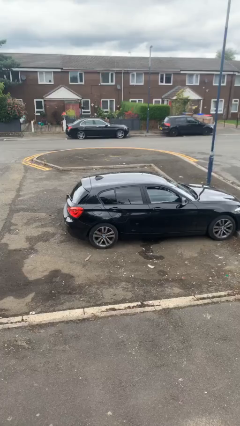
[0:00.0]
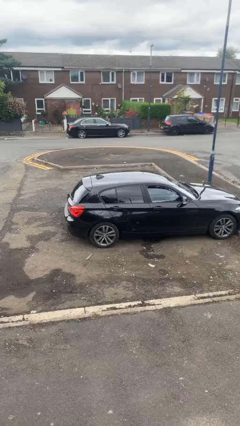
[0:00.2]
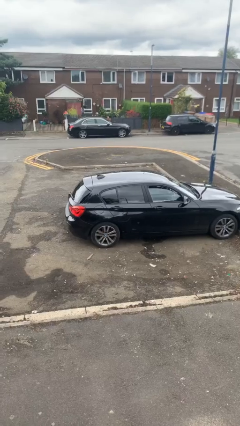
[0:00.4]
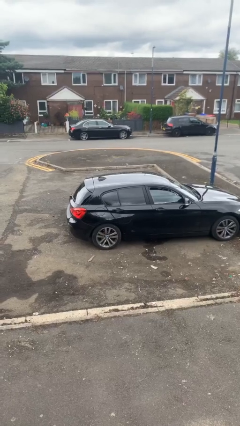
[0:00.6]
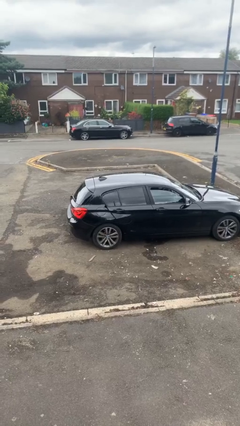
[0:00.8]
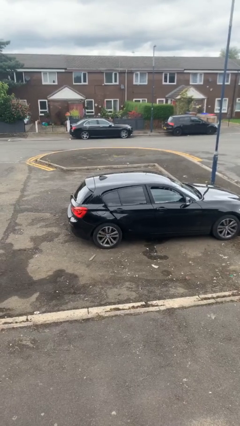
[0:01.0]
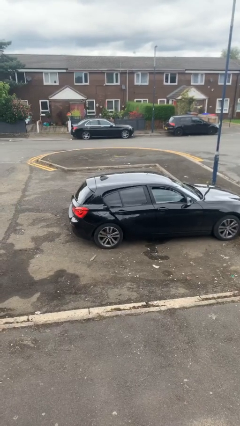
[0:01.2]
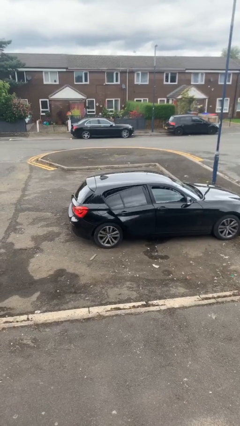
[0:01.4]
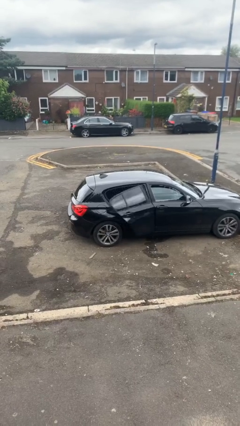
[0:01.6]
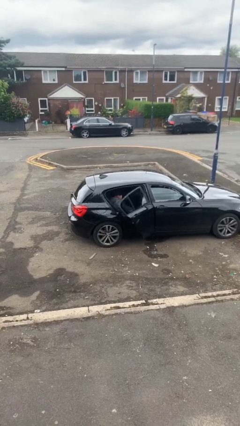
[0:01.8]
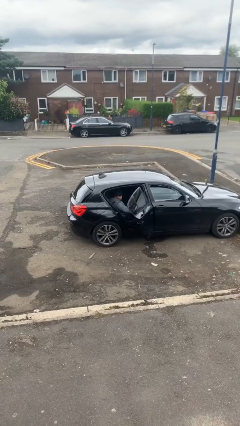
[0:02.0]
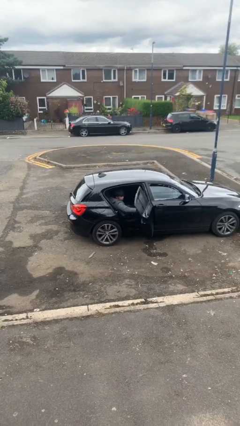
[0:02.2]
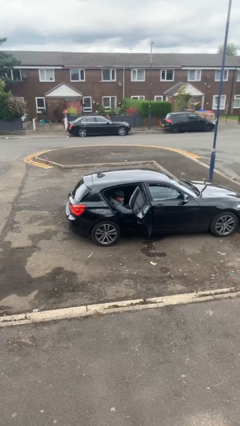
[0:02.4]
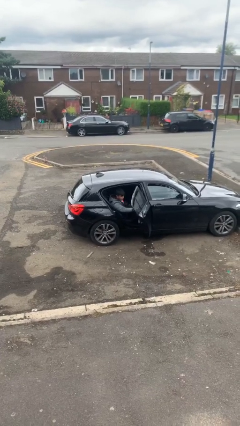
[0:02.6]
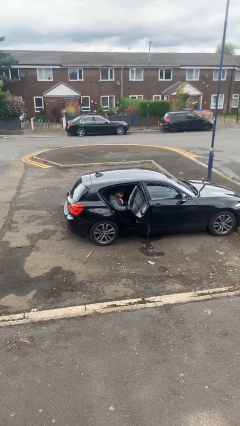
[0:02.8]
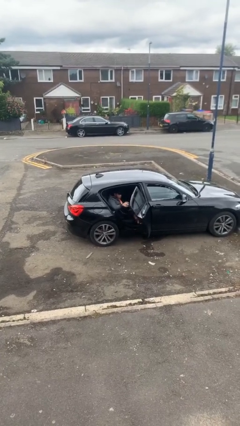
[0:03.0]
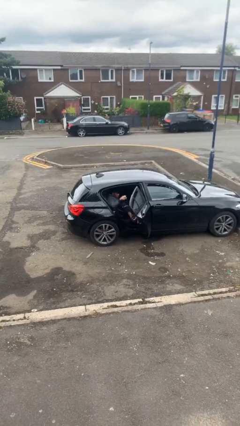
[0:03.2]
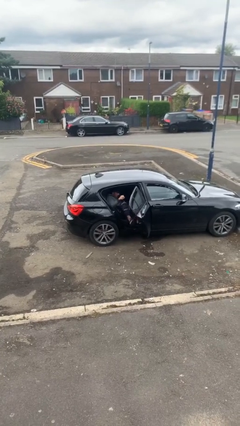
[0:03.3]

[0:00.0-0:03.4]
person opens car door

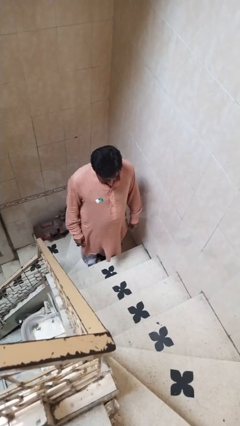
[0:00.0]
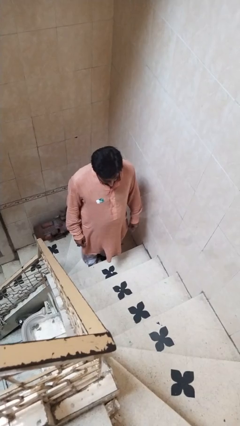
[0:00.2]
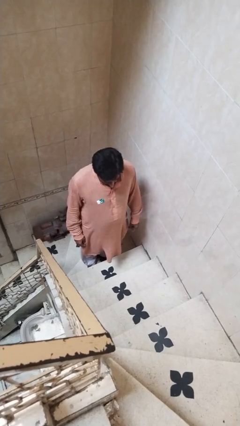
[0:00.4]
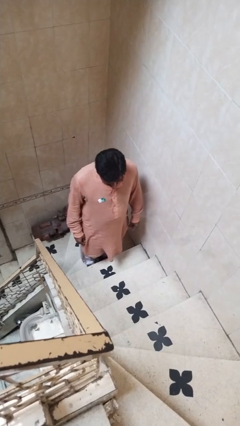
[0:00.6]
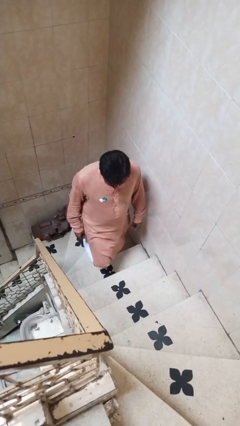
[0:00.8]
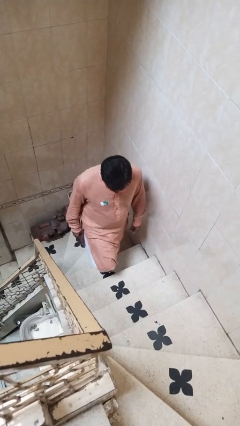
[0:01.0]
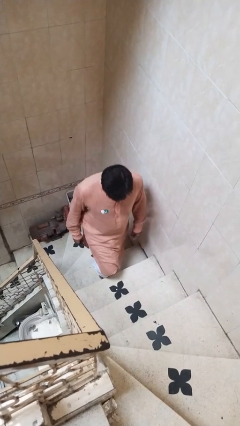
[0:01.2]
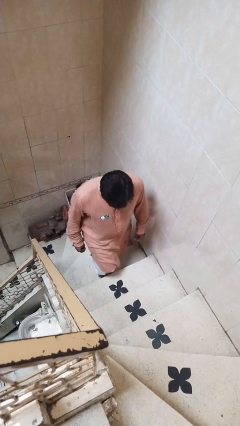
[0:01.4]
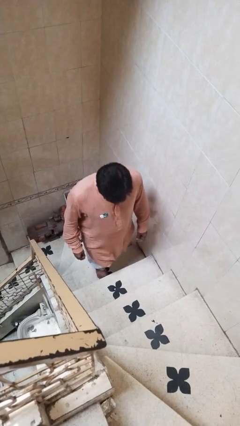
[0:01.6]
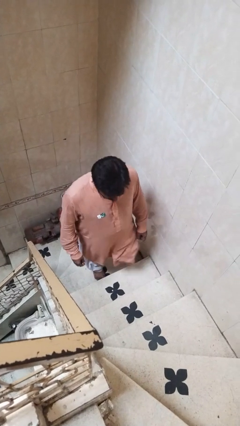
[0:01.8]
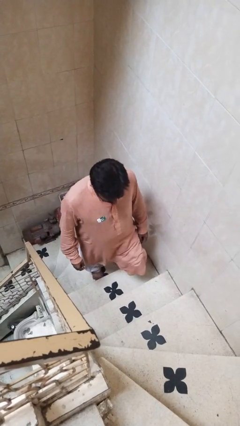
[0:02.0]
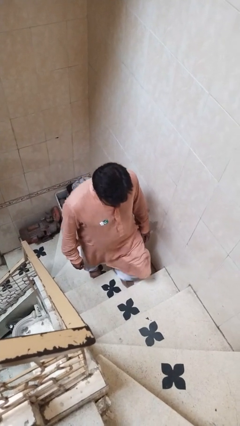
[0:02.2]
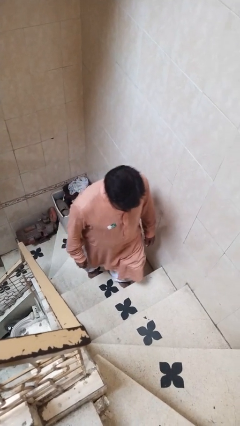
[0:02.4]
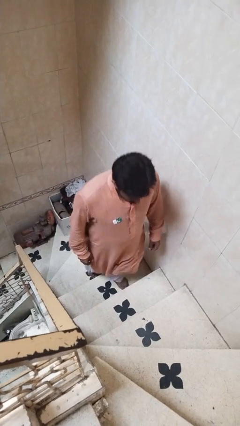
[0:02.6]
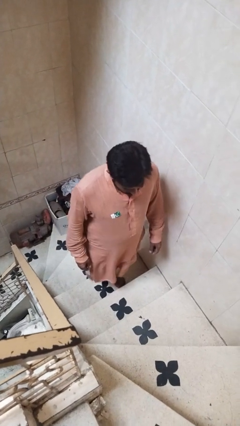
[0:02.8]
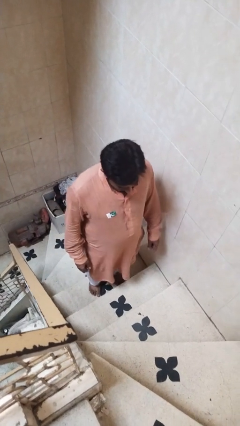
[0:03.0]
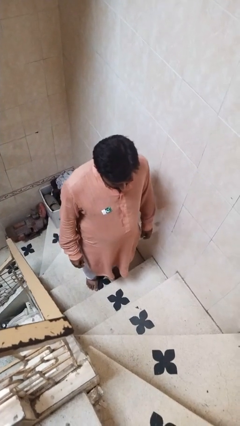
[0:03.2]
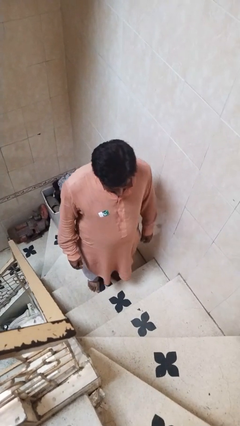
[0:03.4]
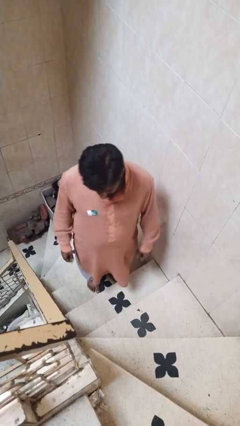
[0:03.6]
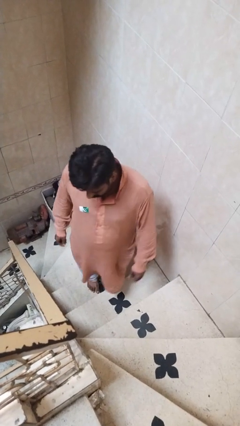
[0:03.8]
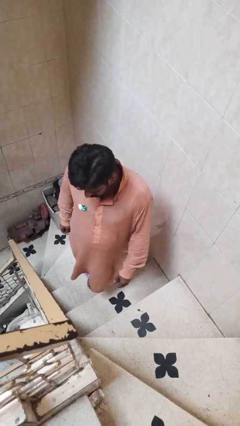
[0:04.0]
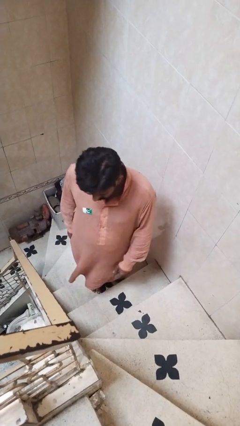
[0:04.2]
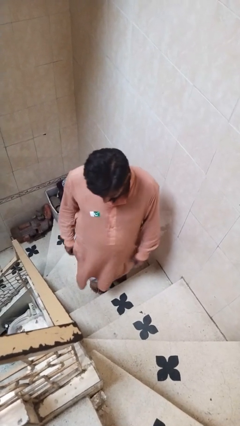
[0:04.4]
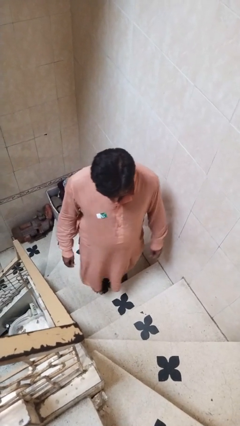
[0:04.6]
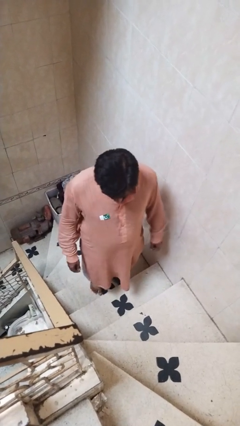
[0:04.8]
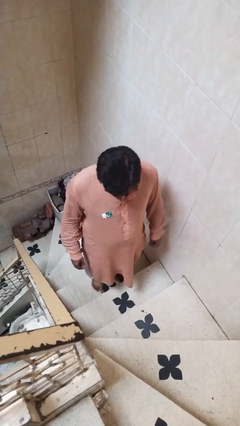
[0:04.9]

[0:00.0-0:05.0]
person climbs up stairs

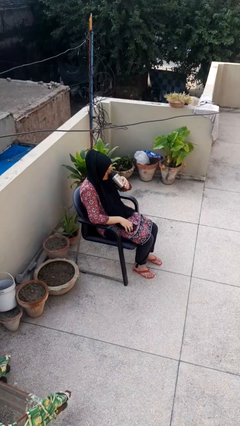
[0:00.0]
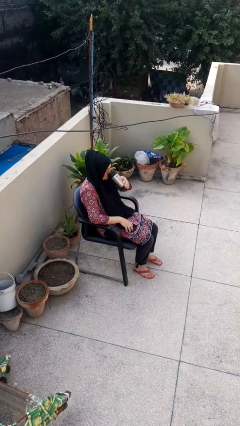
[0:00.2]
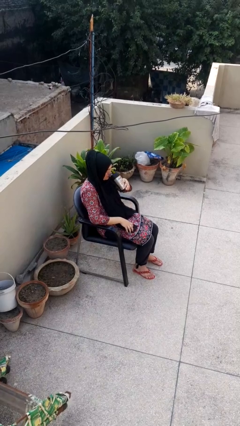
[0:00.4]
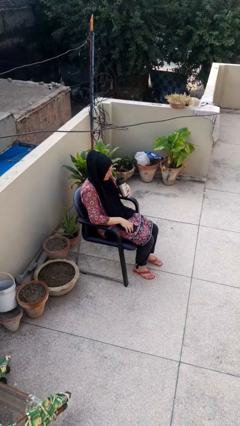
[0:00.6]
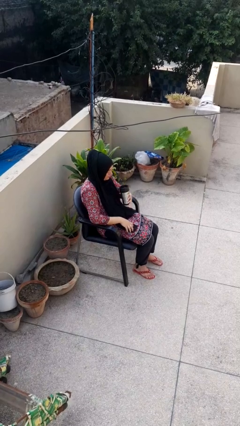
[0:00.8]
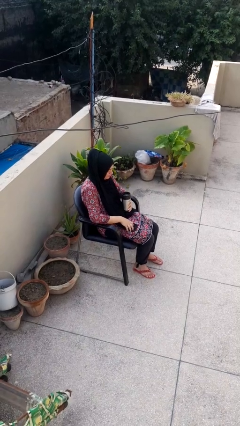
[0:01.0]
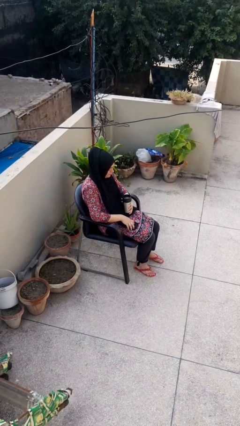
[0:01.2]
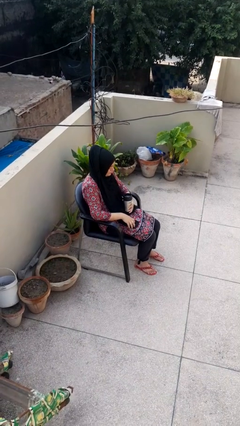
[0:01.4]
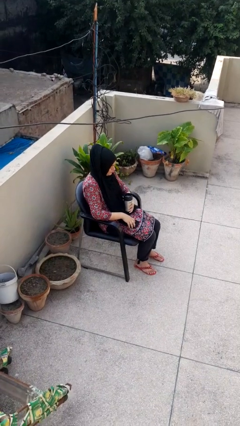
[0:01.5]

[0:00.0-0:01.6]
person drinks from beverage can

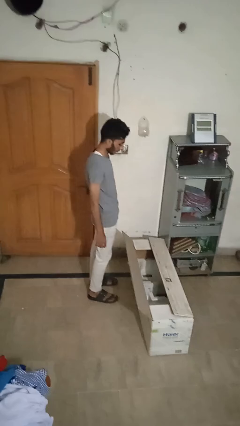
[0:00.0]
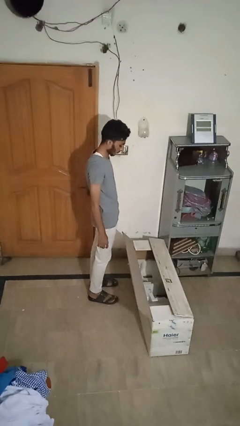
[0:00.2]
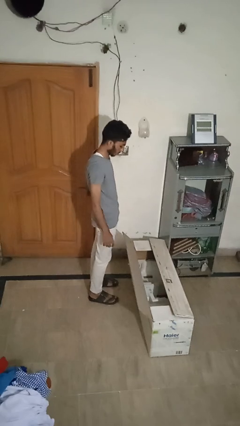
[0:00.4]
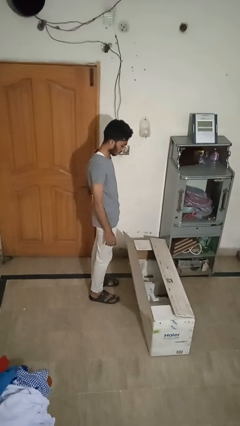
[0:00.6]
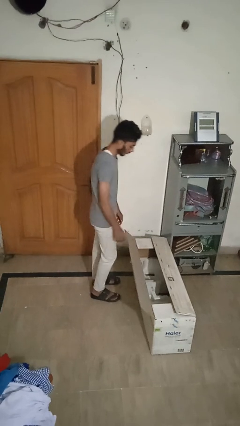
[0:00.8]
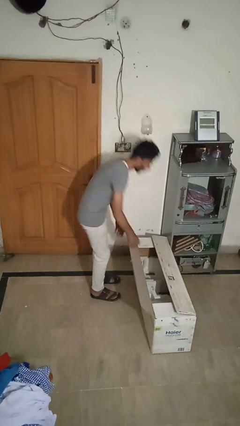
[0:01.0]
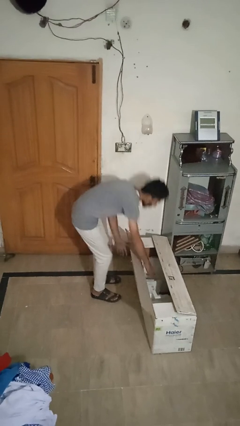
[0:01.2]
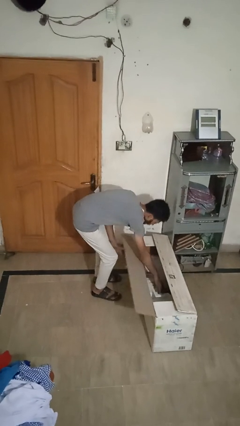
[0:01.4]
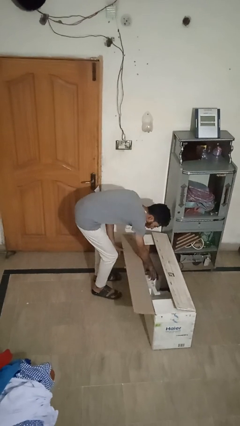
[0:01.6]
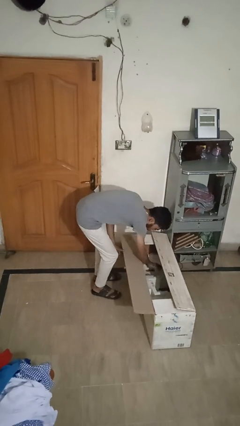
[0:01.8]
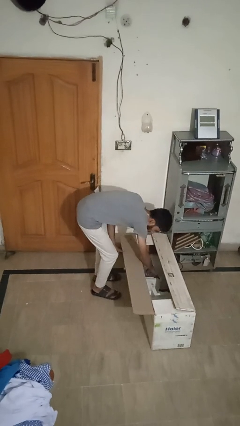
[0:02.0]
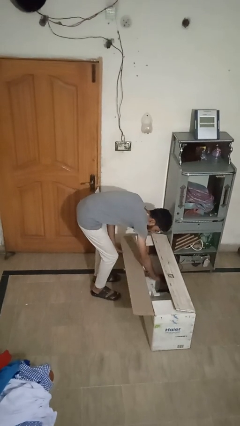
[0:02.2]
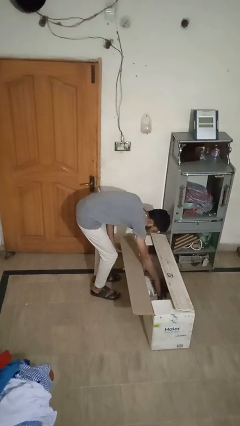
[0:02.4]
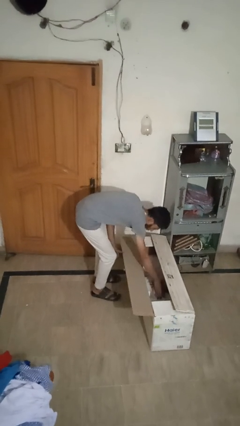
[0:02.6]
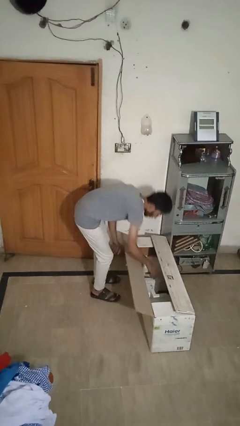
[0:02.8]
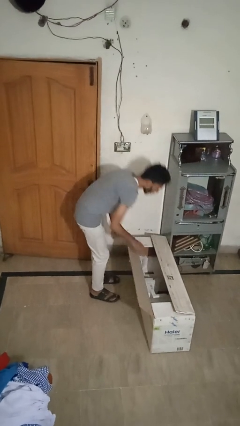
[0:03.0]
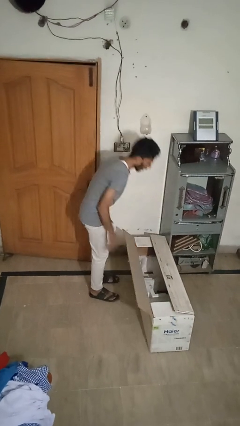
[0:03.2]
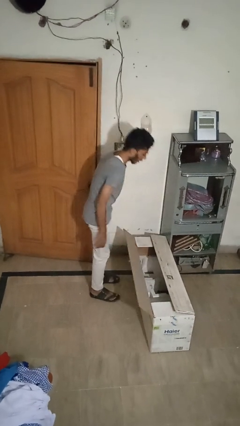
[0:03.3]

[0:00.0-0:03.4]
person searches in box

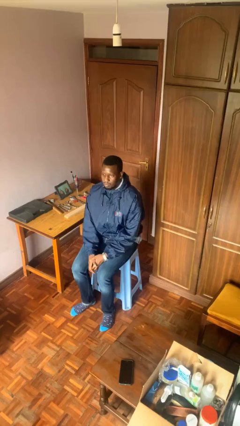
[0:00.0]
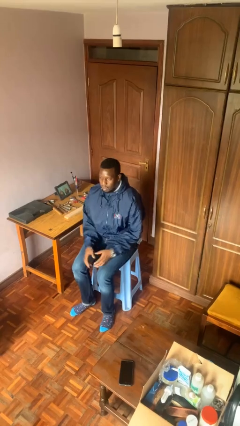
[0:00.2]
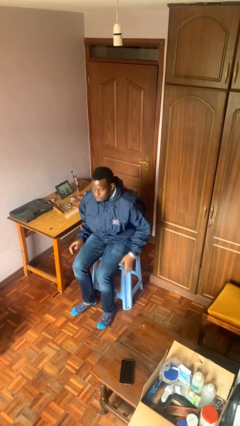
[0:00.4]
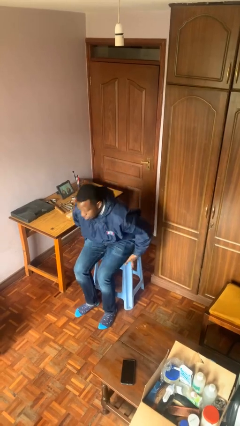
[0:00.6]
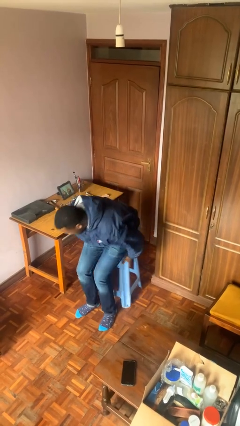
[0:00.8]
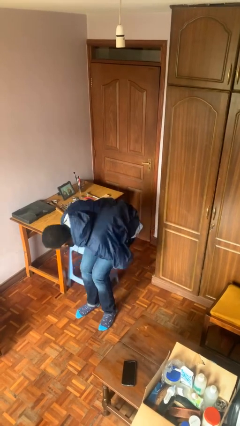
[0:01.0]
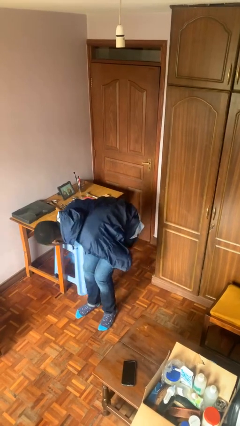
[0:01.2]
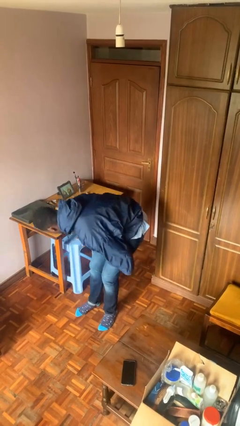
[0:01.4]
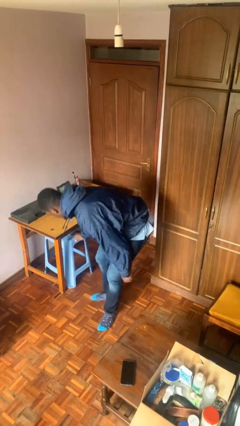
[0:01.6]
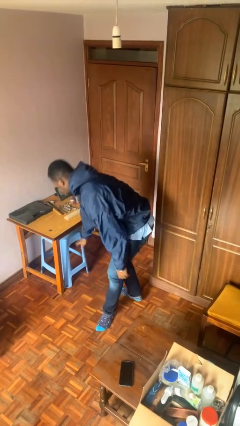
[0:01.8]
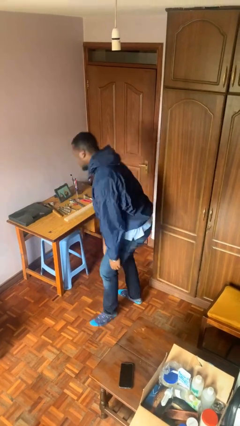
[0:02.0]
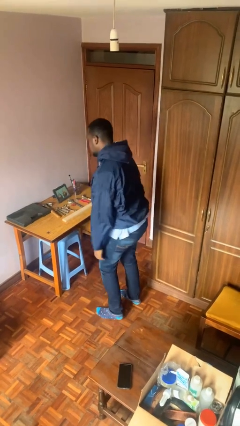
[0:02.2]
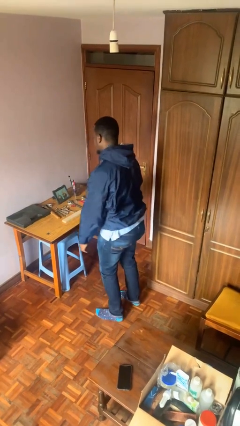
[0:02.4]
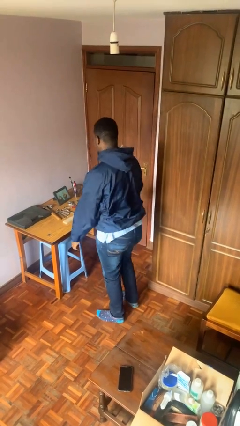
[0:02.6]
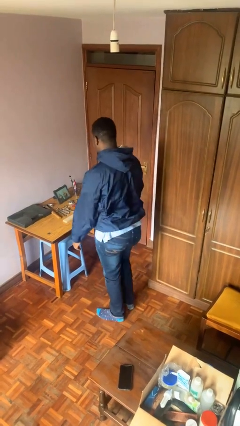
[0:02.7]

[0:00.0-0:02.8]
person stands up

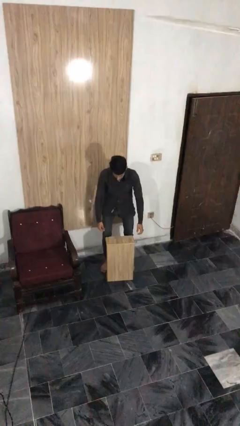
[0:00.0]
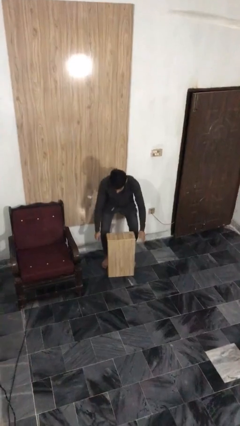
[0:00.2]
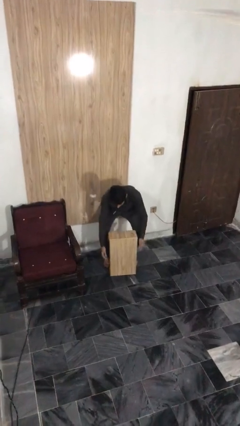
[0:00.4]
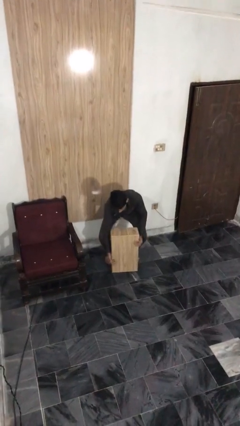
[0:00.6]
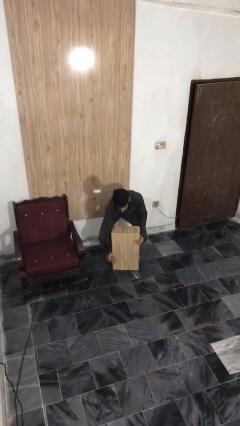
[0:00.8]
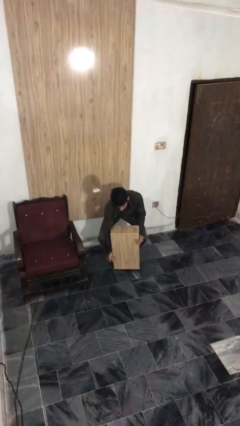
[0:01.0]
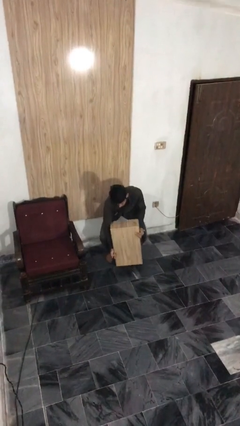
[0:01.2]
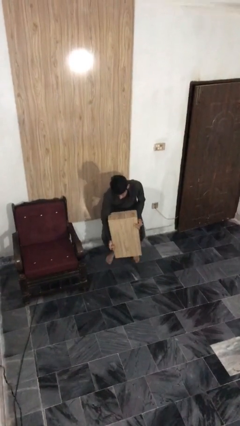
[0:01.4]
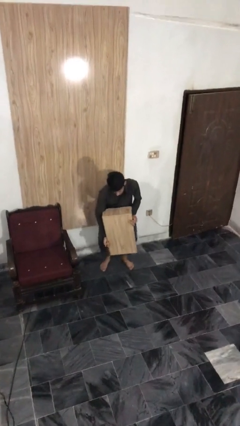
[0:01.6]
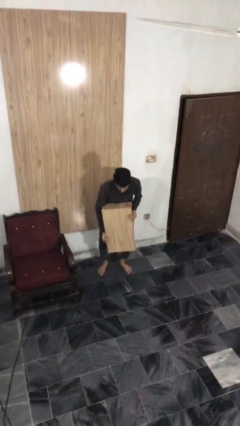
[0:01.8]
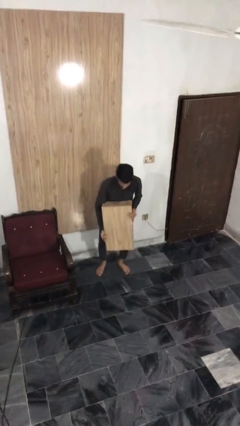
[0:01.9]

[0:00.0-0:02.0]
person picks up object from floor
